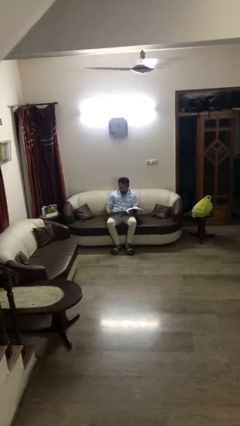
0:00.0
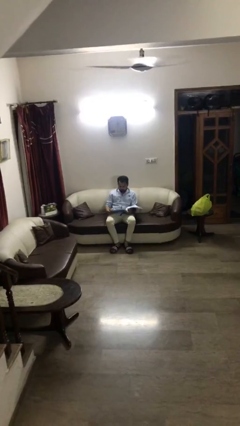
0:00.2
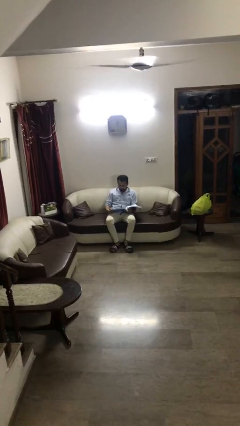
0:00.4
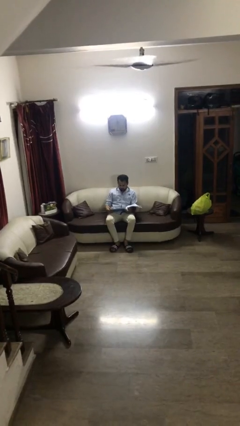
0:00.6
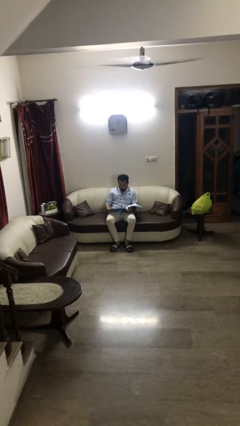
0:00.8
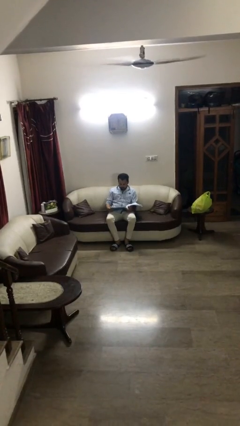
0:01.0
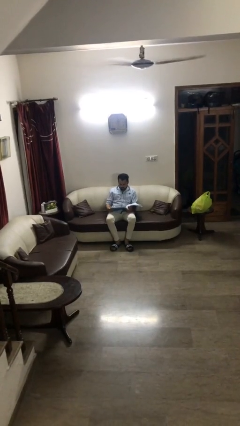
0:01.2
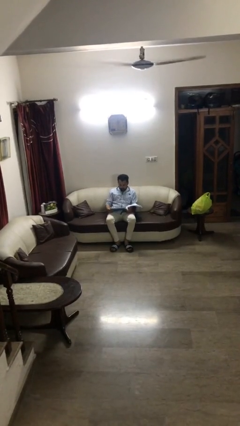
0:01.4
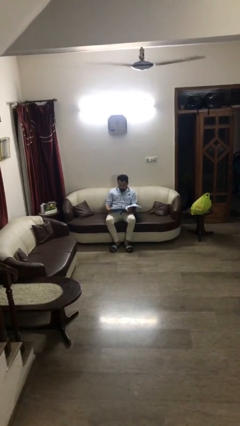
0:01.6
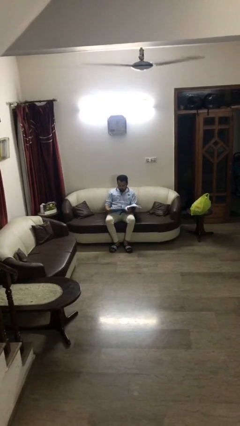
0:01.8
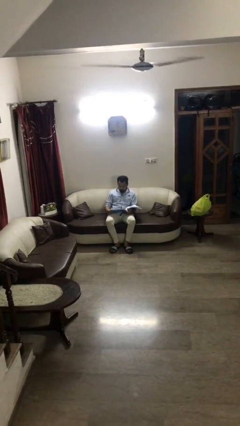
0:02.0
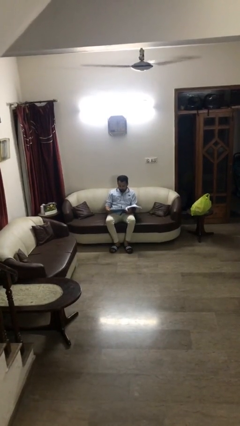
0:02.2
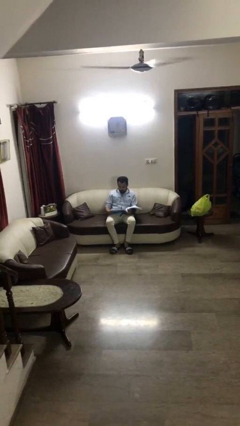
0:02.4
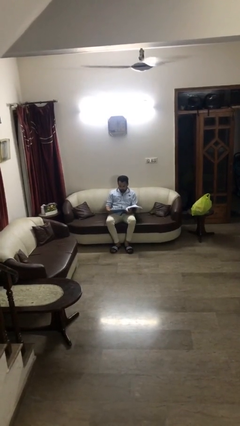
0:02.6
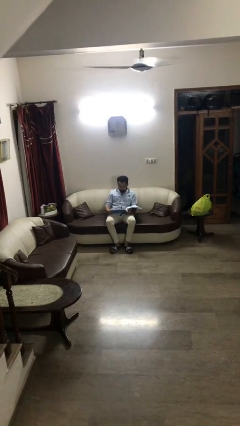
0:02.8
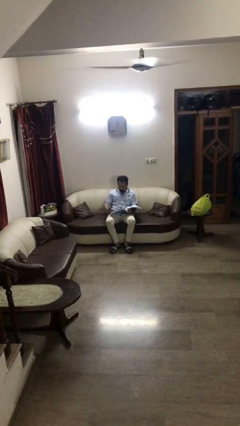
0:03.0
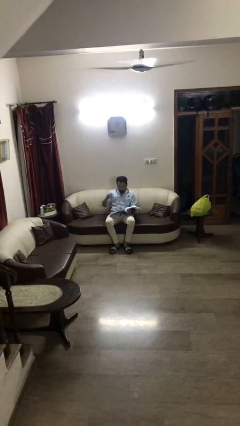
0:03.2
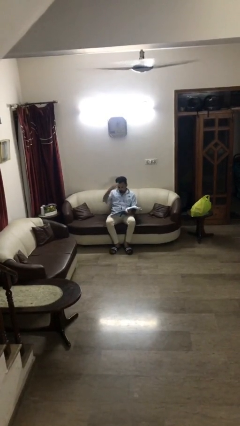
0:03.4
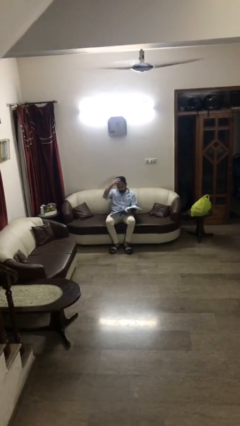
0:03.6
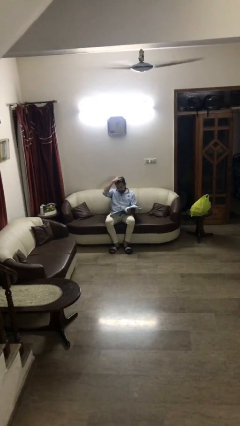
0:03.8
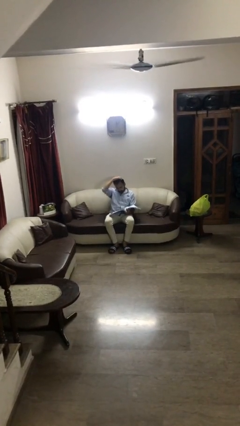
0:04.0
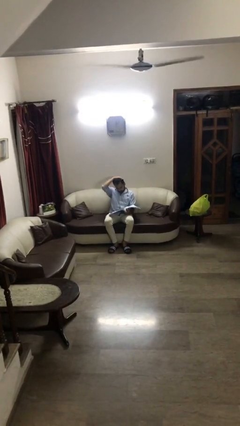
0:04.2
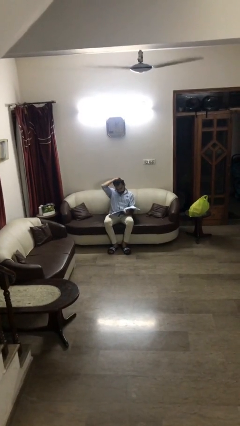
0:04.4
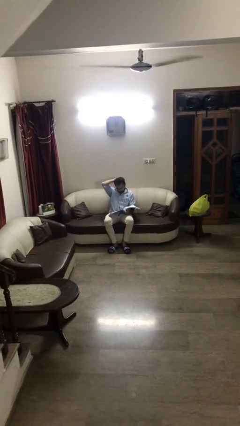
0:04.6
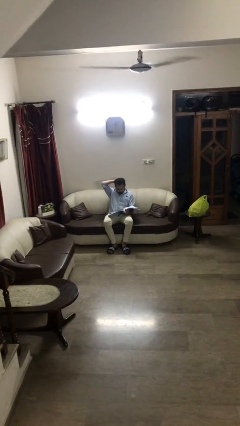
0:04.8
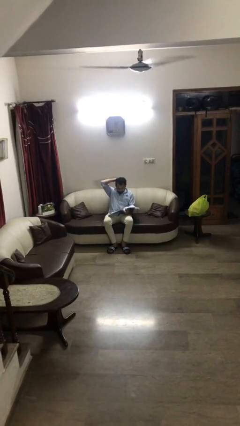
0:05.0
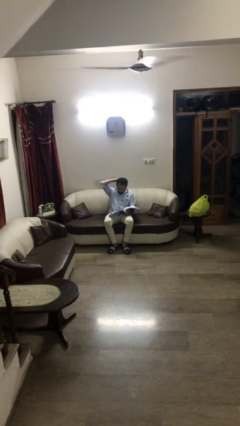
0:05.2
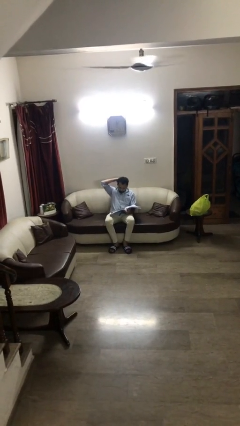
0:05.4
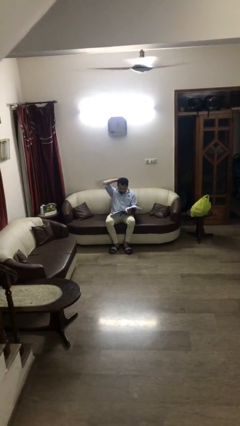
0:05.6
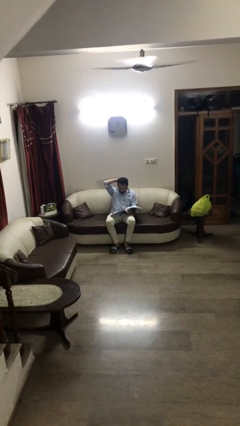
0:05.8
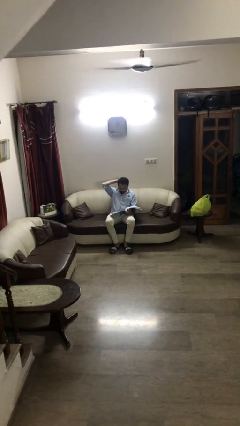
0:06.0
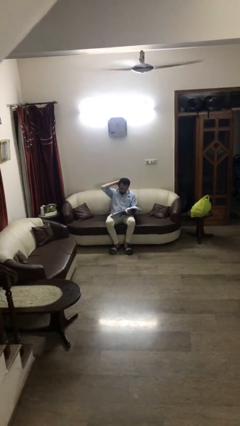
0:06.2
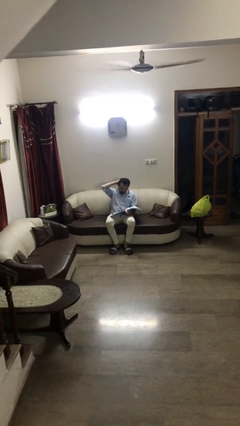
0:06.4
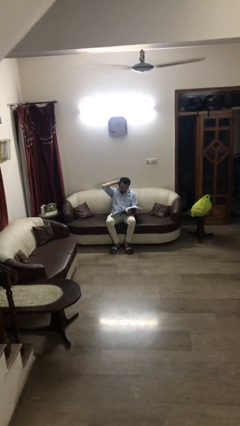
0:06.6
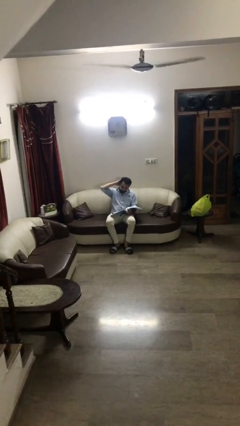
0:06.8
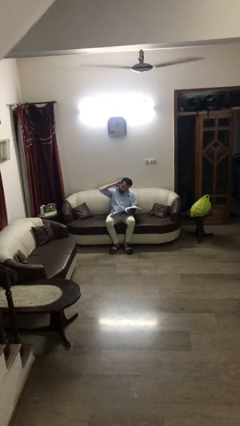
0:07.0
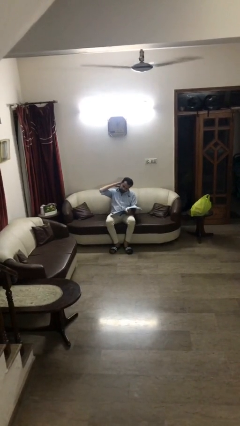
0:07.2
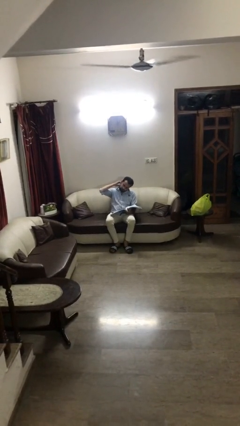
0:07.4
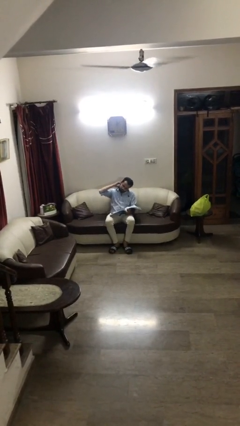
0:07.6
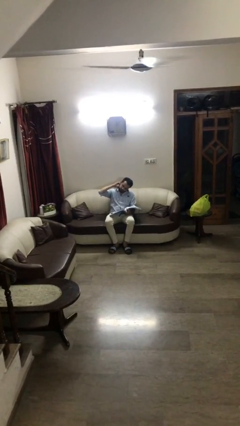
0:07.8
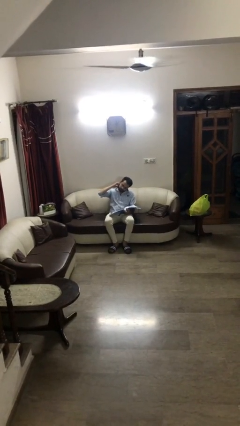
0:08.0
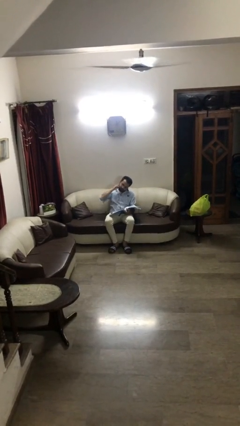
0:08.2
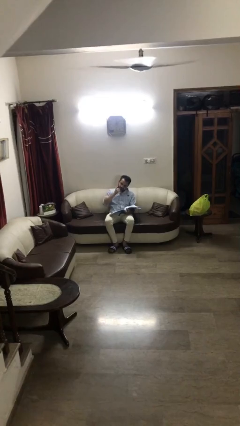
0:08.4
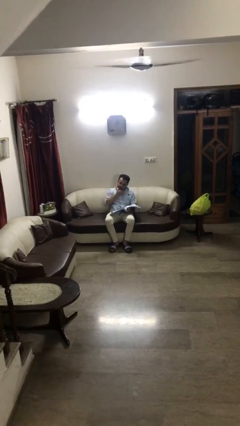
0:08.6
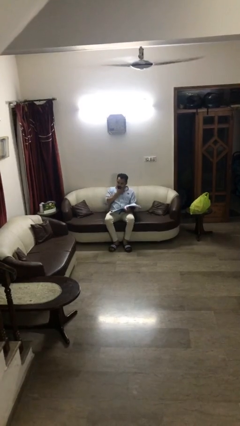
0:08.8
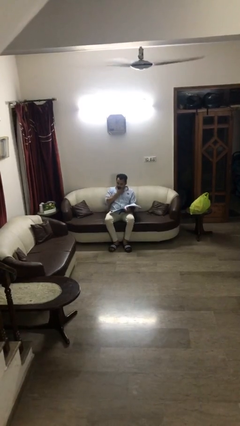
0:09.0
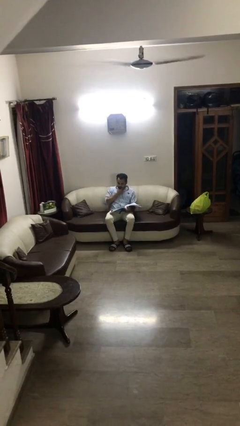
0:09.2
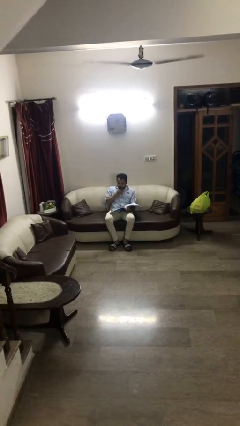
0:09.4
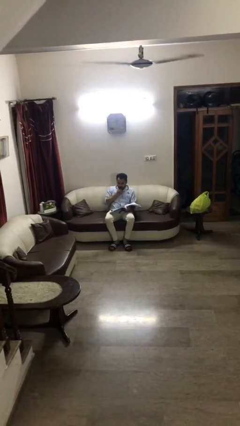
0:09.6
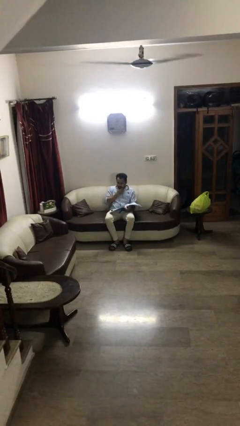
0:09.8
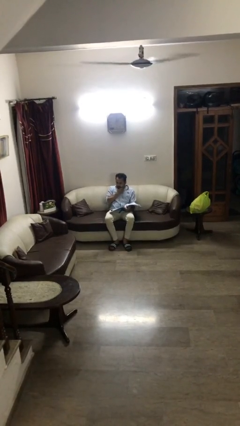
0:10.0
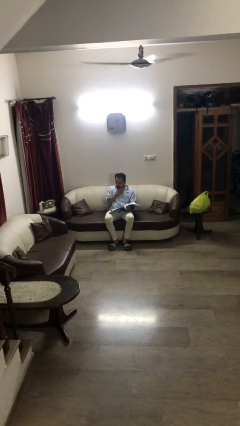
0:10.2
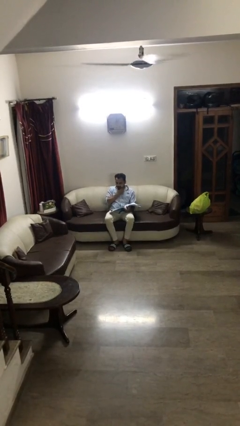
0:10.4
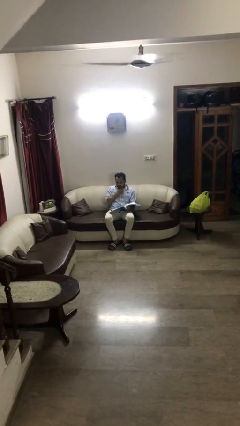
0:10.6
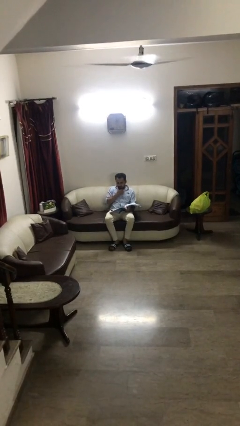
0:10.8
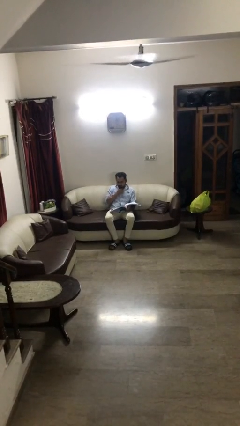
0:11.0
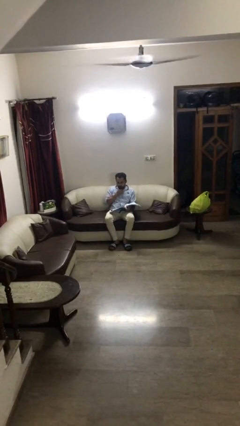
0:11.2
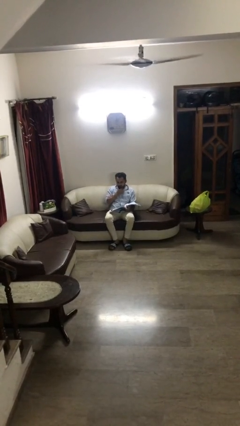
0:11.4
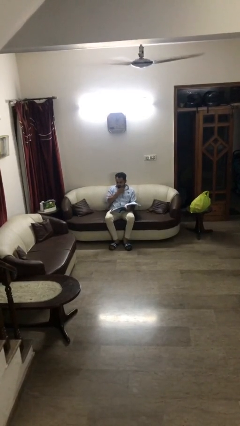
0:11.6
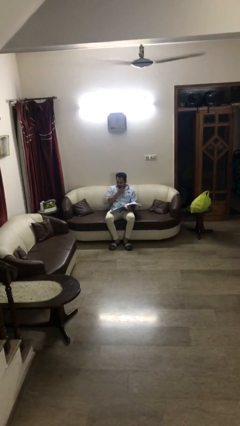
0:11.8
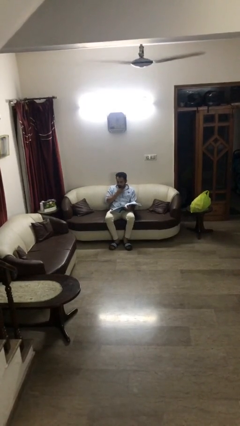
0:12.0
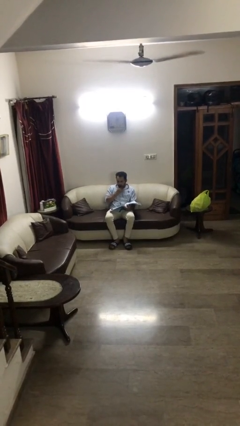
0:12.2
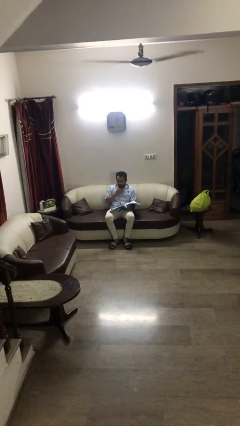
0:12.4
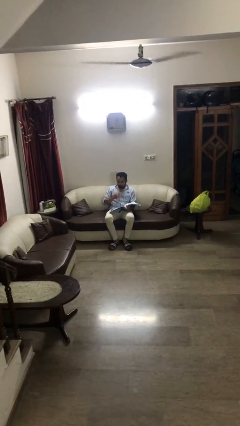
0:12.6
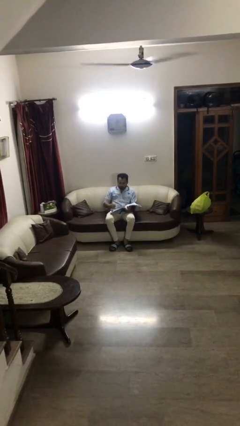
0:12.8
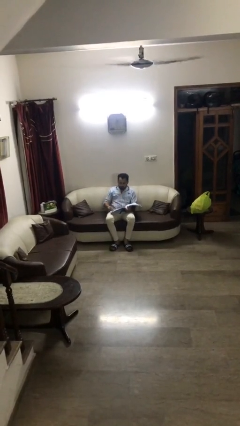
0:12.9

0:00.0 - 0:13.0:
person reads document

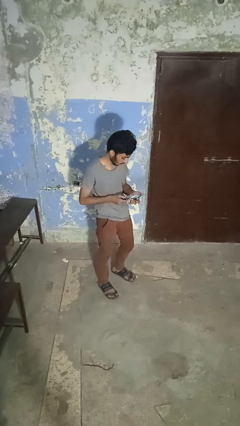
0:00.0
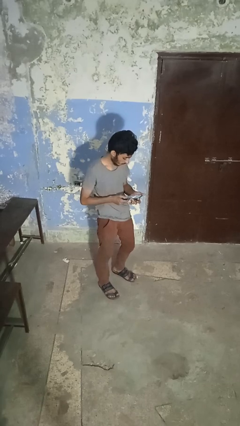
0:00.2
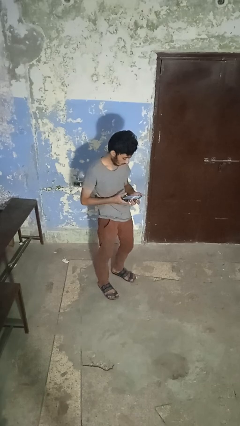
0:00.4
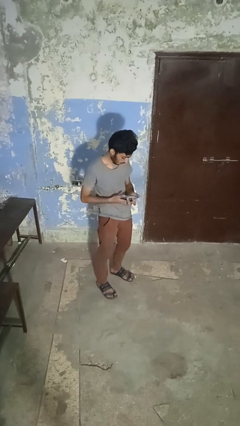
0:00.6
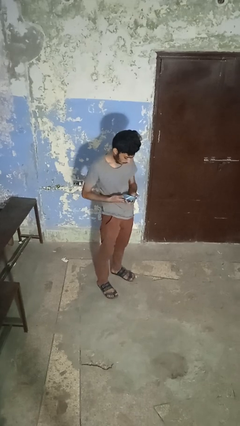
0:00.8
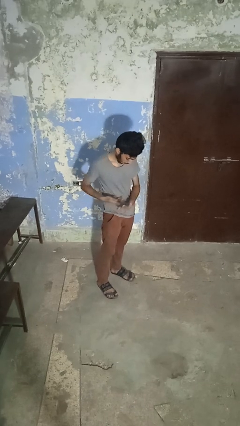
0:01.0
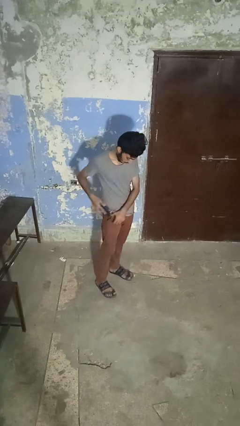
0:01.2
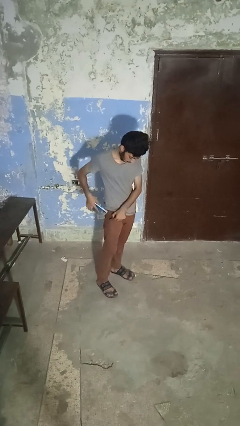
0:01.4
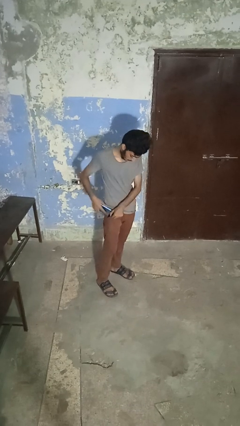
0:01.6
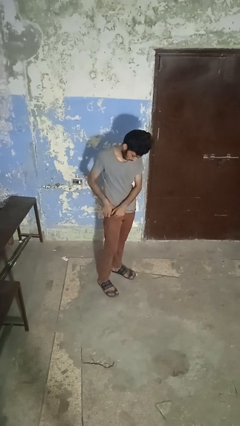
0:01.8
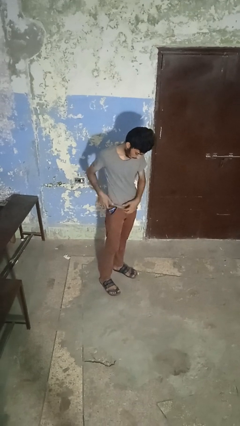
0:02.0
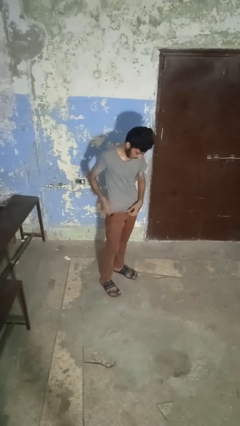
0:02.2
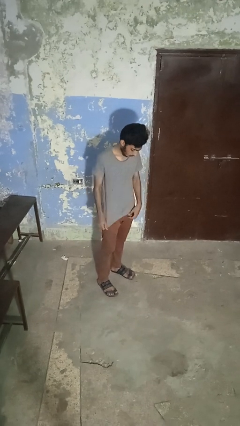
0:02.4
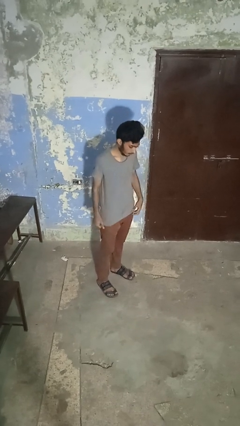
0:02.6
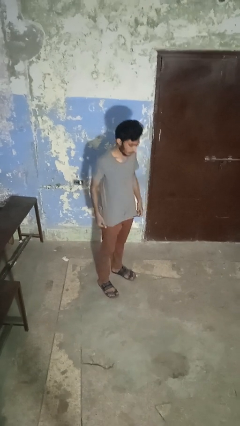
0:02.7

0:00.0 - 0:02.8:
person puts phone into pocket

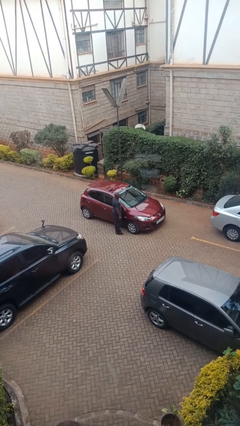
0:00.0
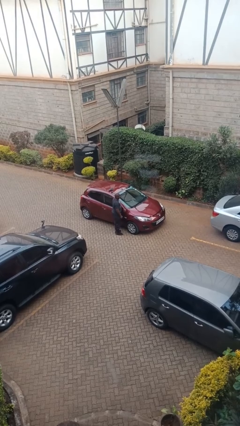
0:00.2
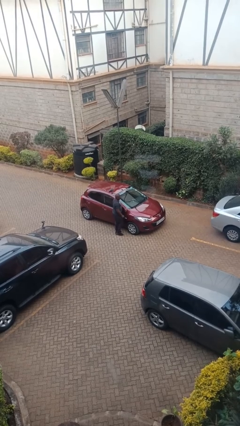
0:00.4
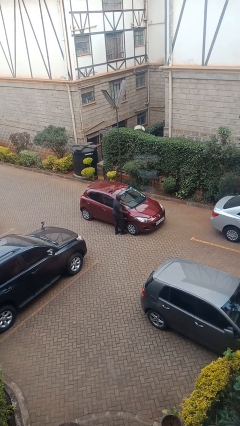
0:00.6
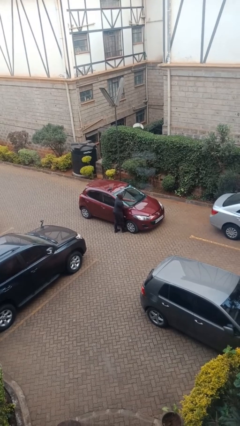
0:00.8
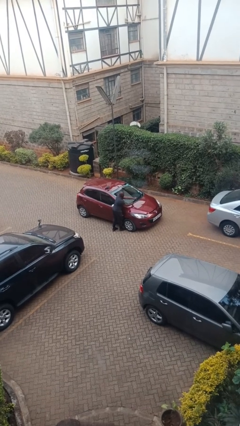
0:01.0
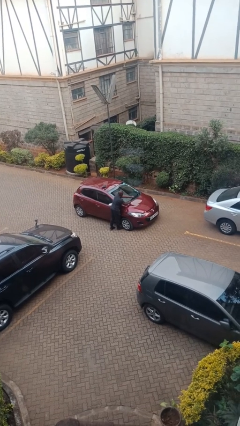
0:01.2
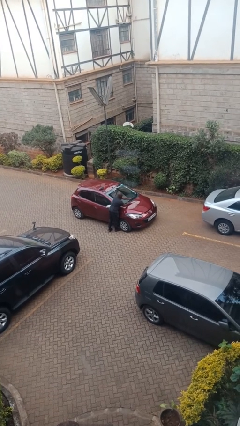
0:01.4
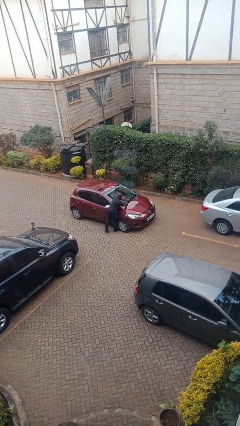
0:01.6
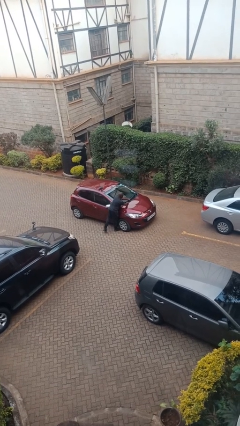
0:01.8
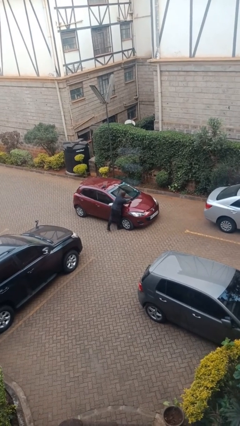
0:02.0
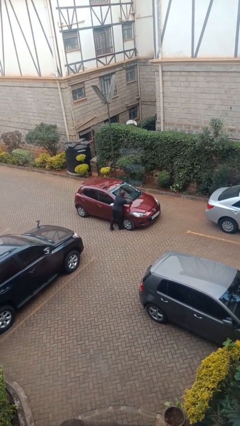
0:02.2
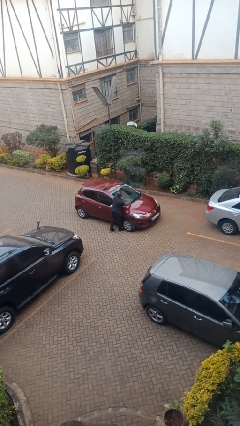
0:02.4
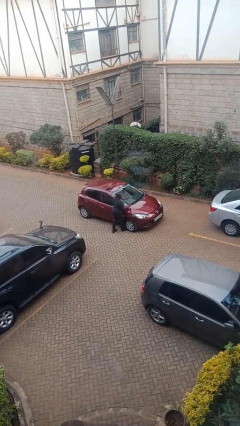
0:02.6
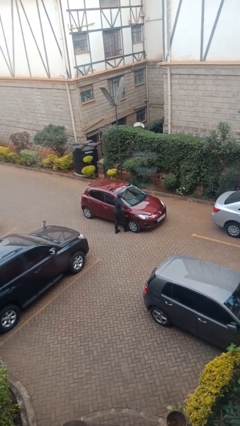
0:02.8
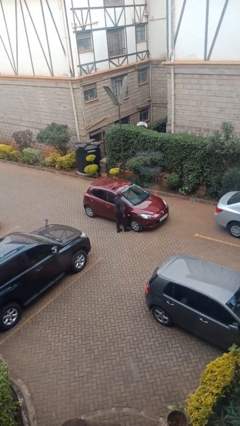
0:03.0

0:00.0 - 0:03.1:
person flips down car wipers
